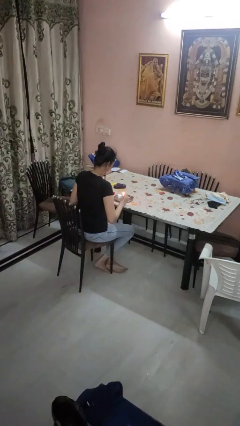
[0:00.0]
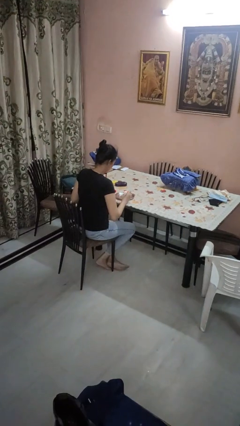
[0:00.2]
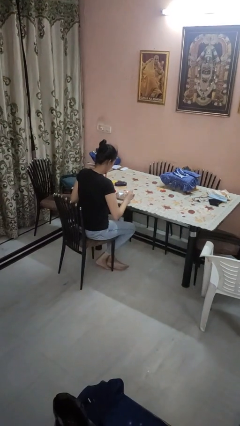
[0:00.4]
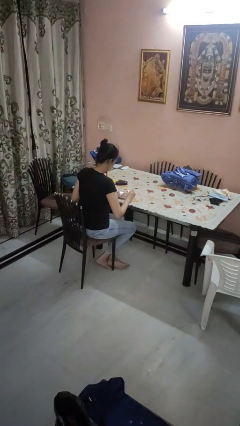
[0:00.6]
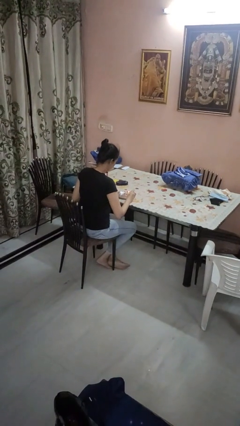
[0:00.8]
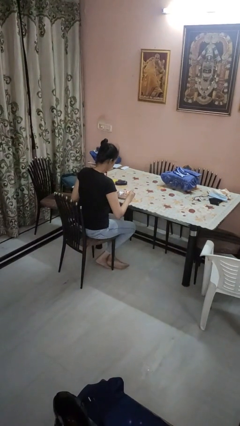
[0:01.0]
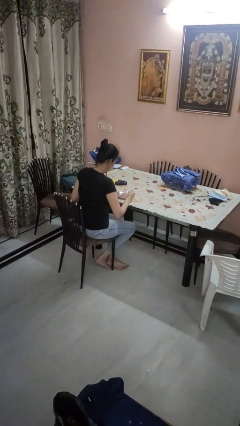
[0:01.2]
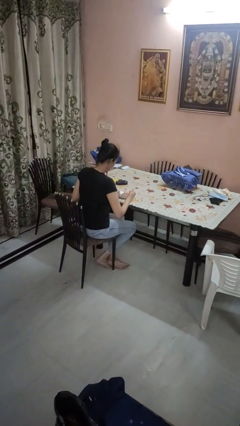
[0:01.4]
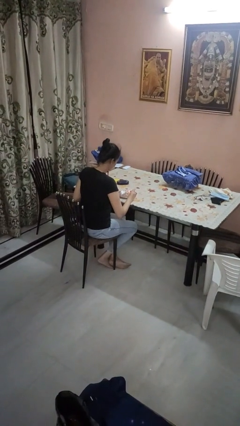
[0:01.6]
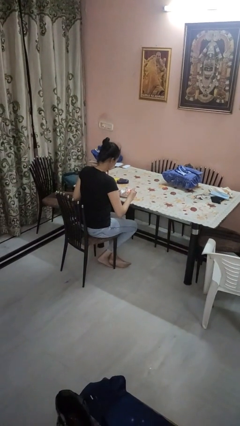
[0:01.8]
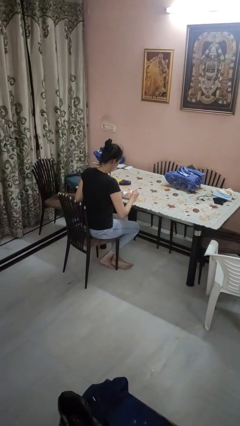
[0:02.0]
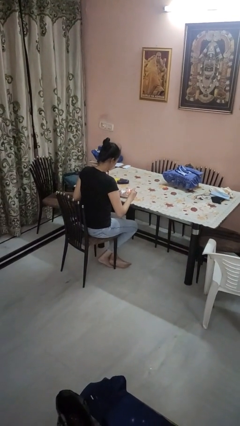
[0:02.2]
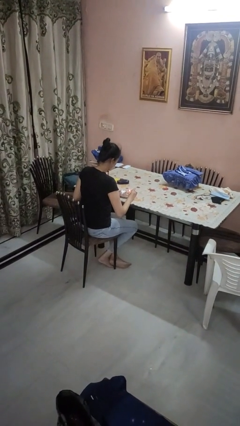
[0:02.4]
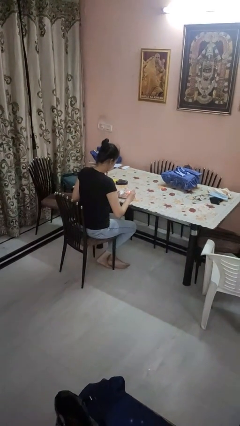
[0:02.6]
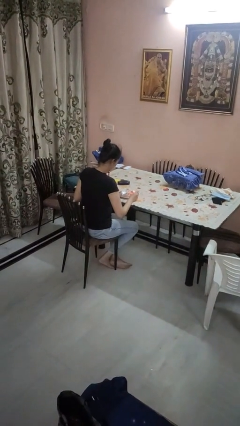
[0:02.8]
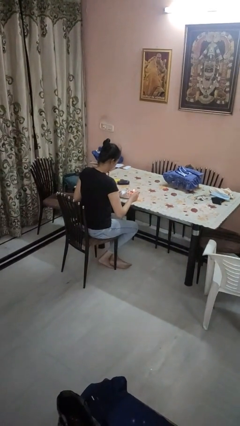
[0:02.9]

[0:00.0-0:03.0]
person lights candle

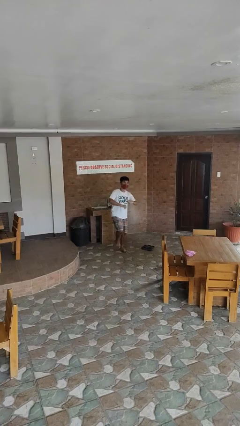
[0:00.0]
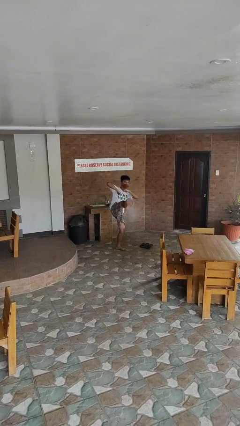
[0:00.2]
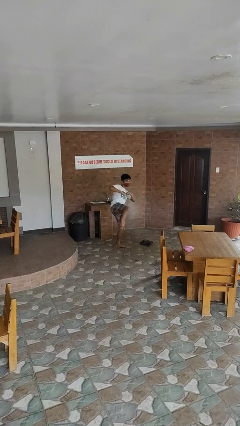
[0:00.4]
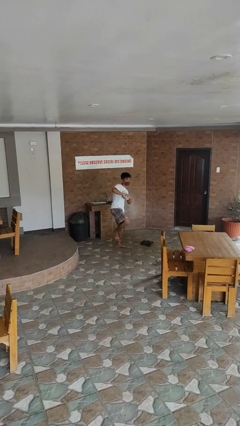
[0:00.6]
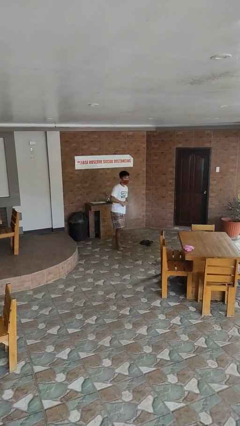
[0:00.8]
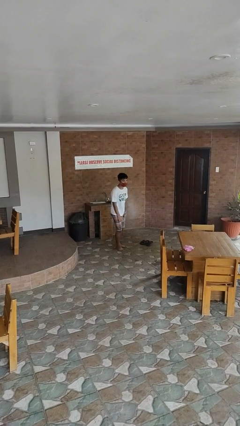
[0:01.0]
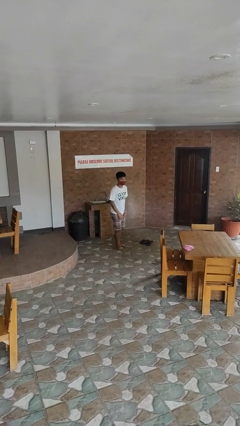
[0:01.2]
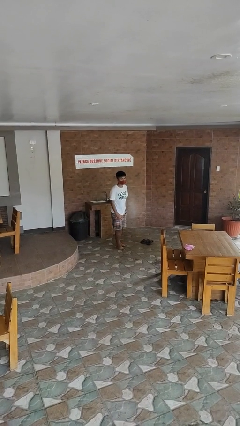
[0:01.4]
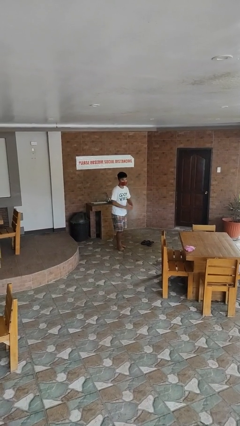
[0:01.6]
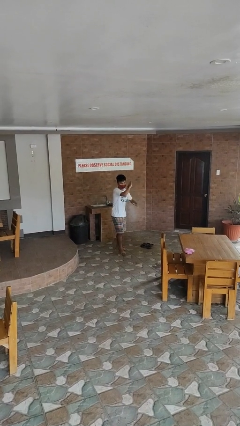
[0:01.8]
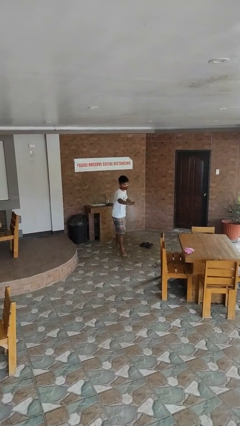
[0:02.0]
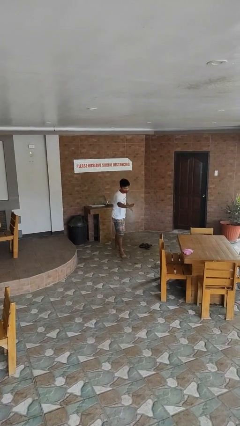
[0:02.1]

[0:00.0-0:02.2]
person karate kicks

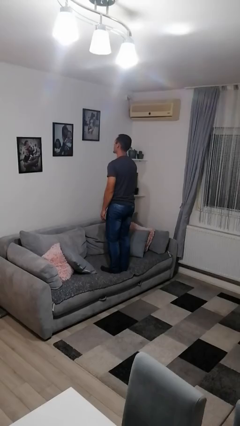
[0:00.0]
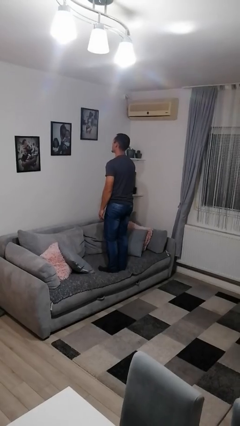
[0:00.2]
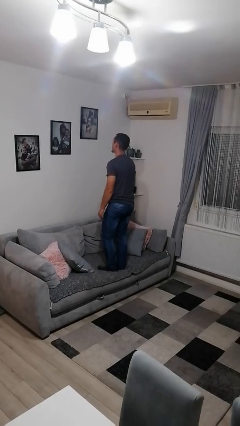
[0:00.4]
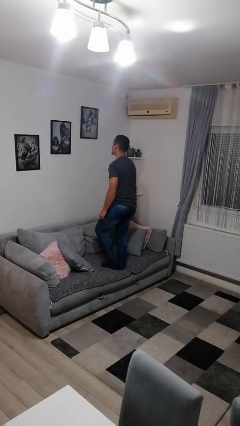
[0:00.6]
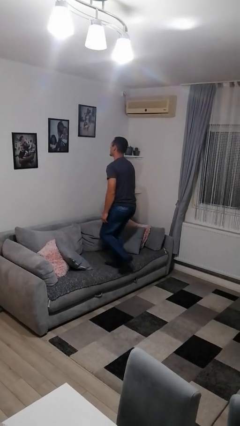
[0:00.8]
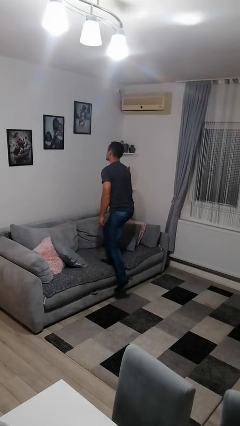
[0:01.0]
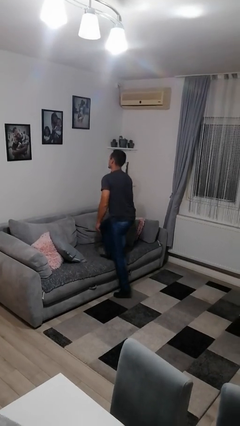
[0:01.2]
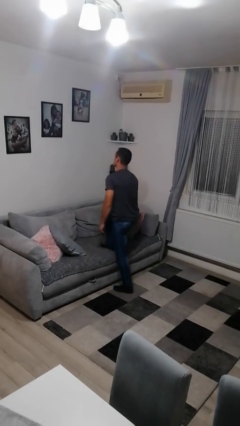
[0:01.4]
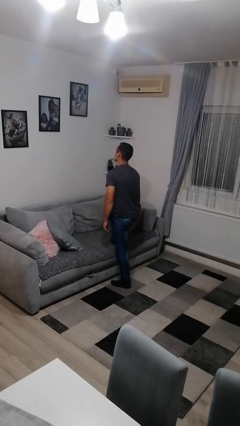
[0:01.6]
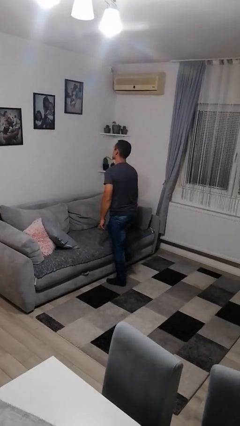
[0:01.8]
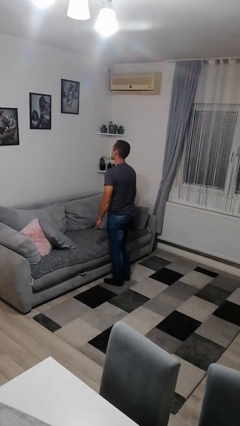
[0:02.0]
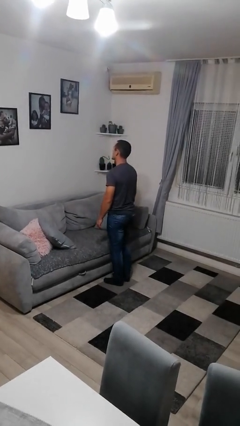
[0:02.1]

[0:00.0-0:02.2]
person climbs off couch

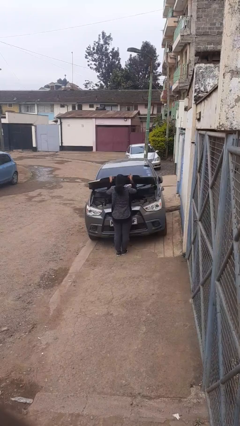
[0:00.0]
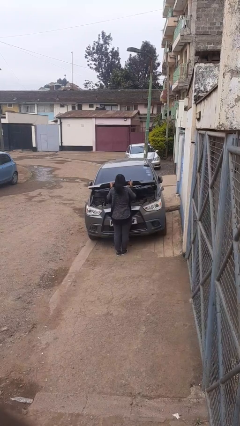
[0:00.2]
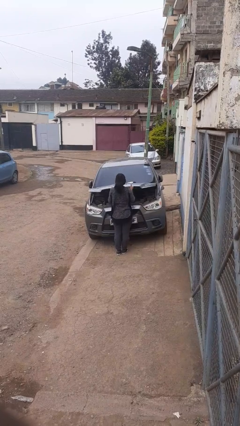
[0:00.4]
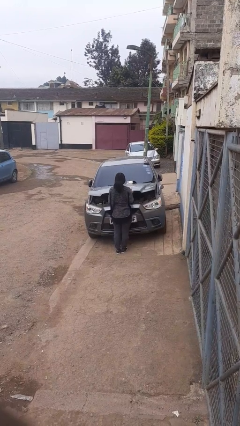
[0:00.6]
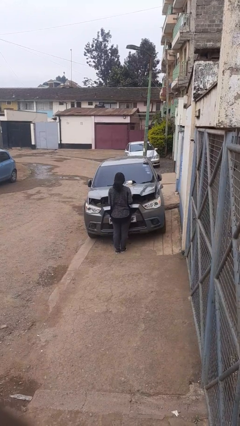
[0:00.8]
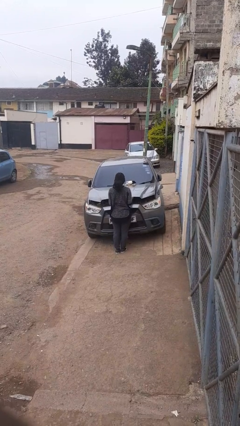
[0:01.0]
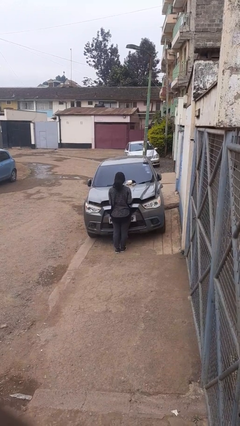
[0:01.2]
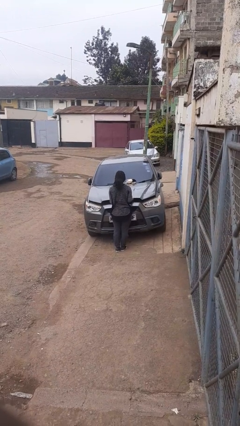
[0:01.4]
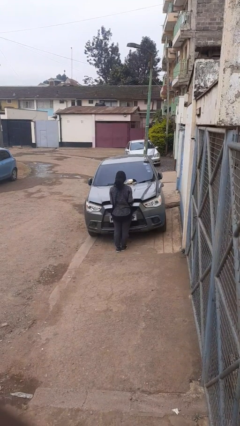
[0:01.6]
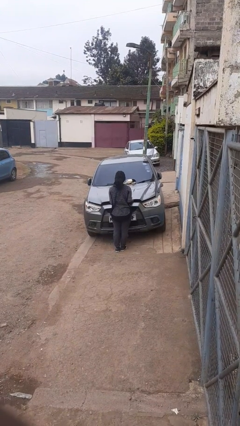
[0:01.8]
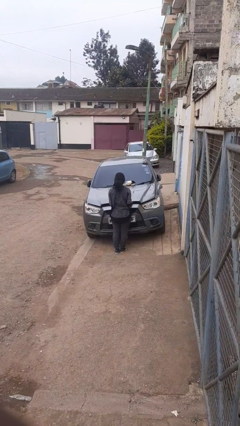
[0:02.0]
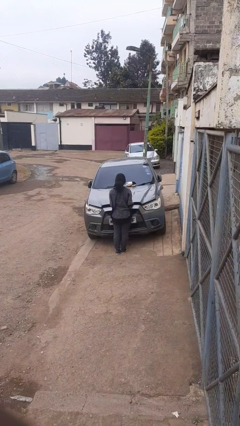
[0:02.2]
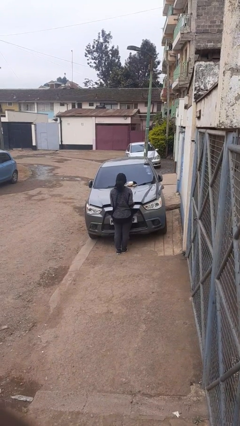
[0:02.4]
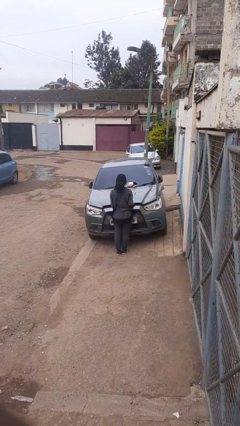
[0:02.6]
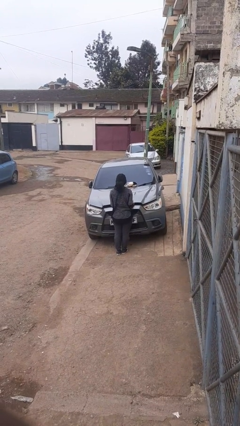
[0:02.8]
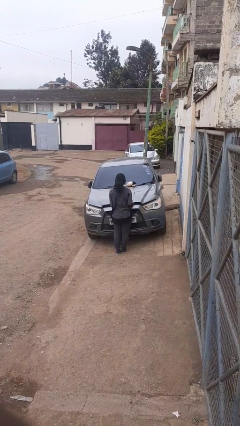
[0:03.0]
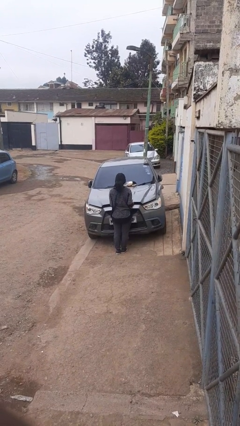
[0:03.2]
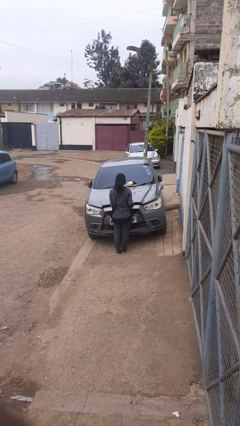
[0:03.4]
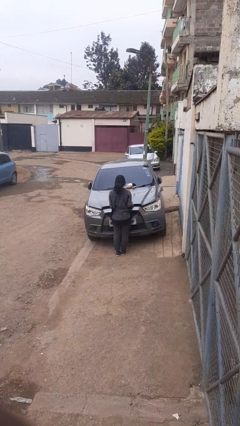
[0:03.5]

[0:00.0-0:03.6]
person closes car hood

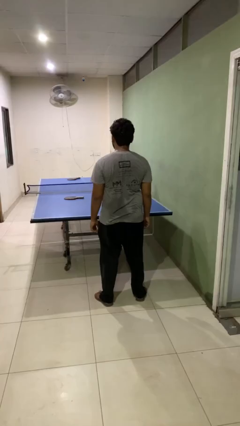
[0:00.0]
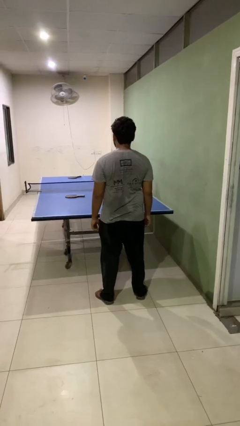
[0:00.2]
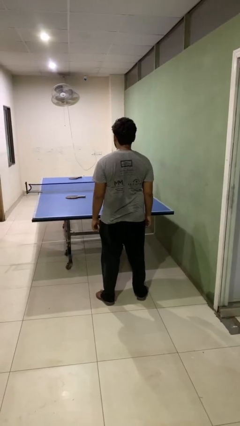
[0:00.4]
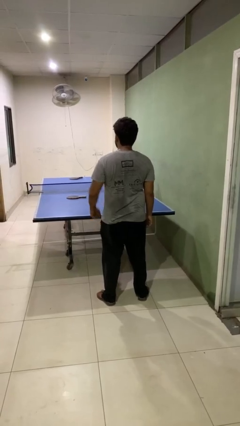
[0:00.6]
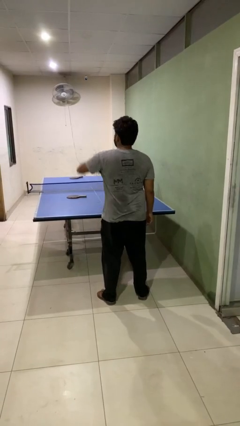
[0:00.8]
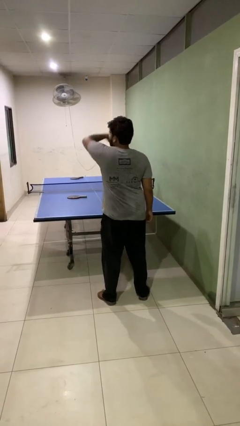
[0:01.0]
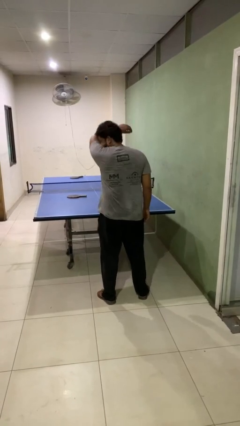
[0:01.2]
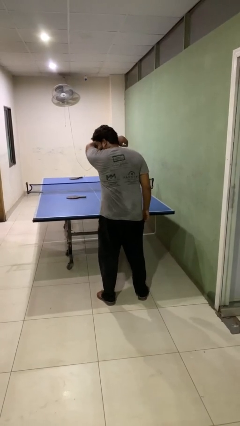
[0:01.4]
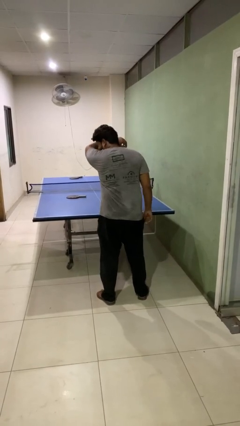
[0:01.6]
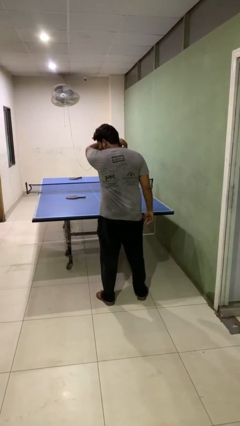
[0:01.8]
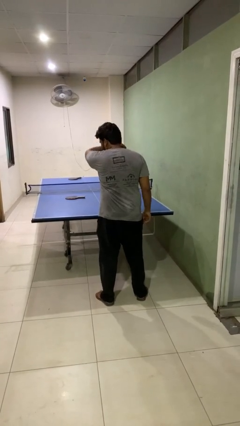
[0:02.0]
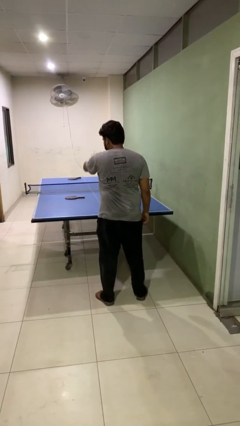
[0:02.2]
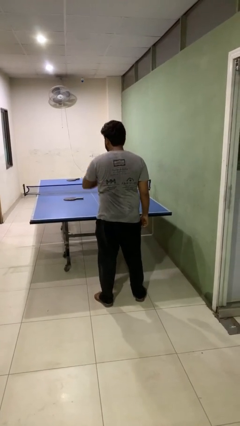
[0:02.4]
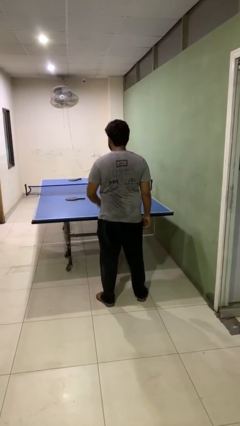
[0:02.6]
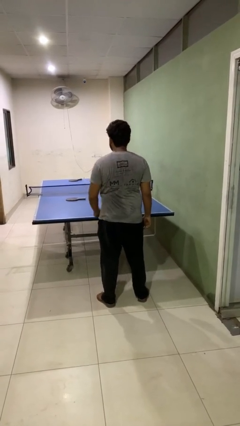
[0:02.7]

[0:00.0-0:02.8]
person sneezes into arm

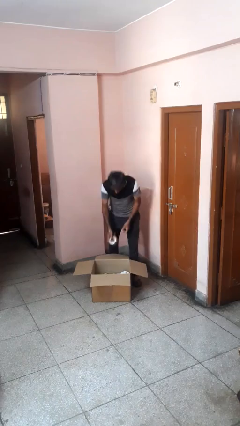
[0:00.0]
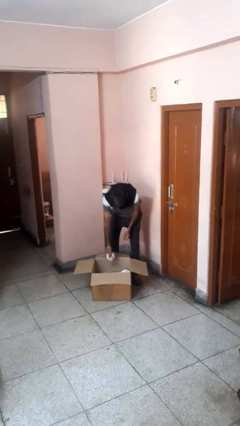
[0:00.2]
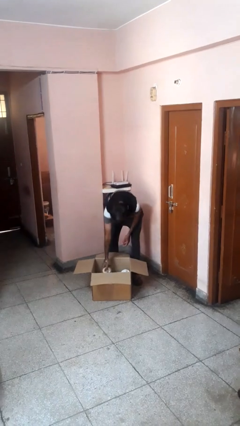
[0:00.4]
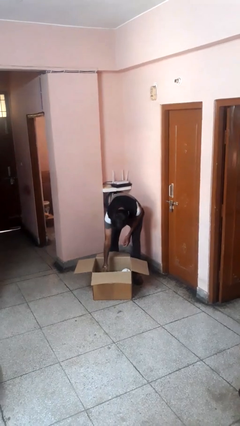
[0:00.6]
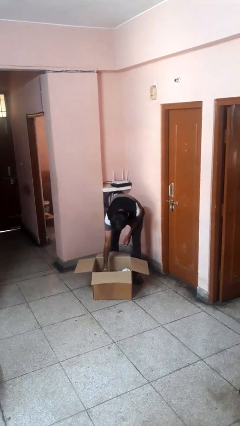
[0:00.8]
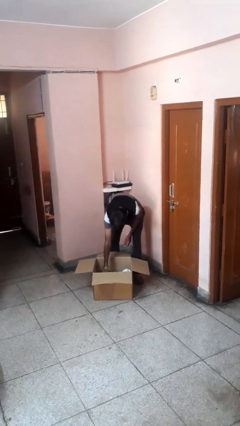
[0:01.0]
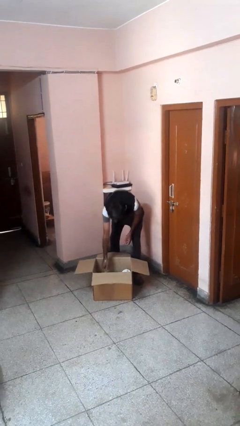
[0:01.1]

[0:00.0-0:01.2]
person puts object into box

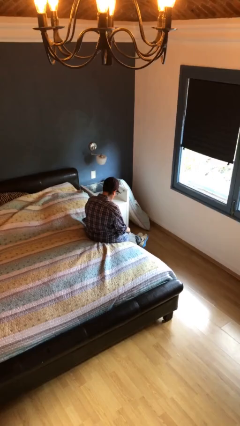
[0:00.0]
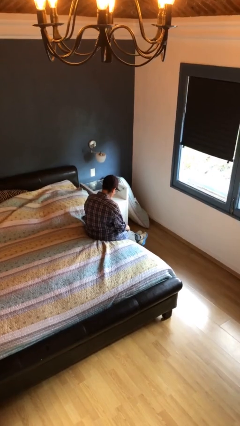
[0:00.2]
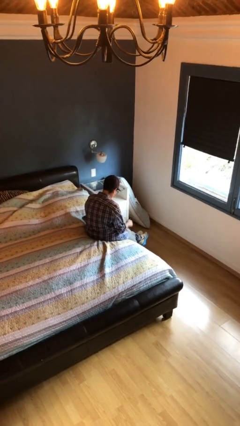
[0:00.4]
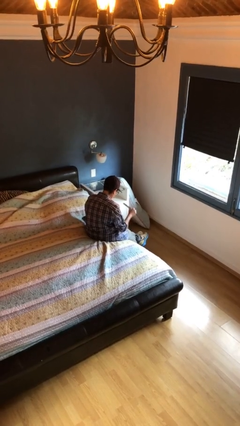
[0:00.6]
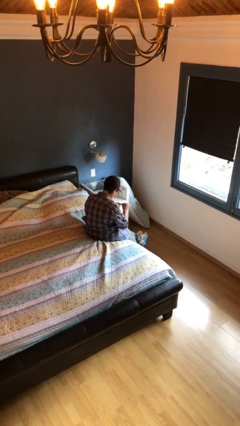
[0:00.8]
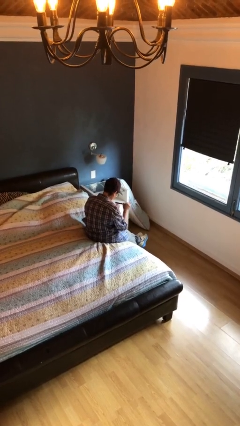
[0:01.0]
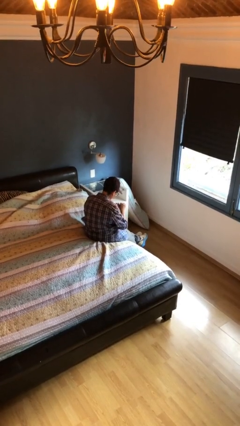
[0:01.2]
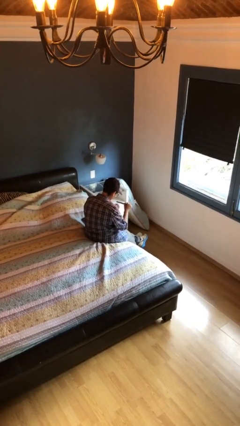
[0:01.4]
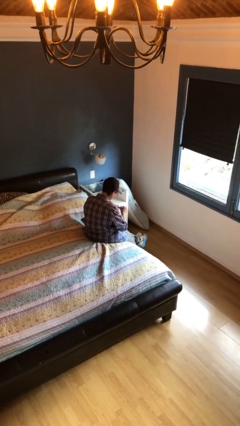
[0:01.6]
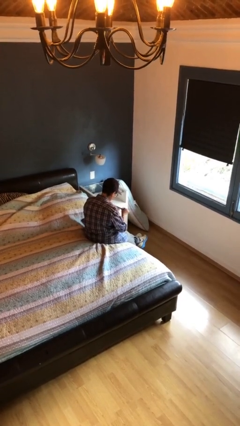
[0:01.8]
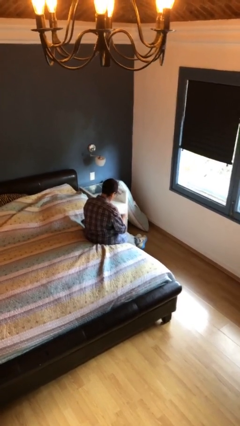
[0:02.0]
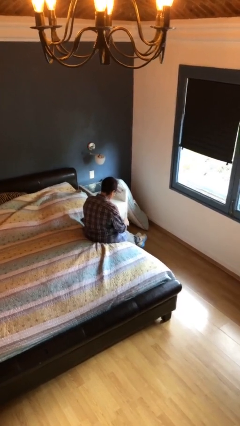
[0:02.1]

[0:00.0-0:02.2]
person files fingernails

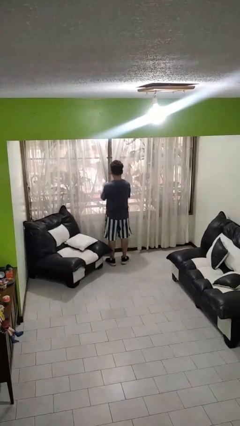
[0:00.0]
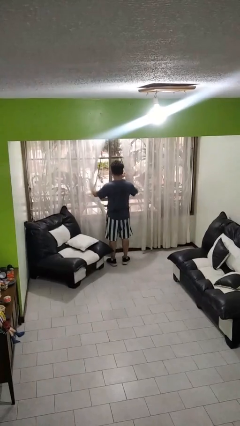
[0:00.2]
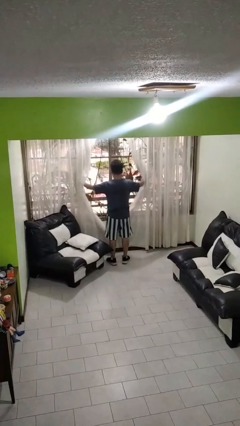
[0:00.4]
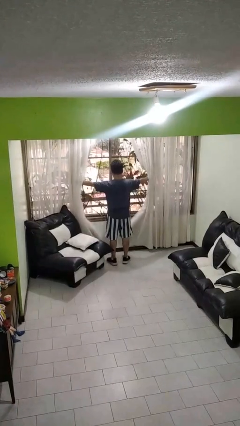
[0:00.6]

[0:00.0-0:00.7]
person opens curtains
